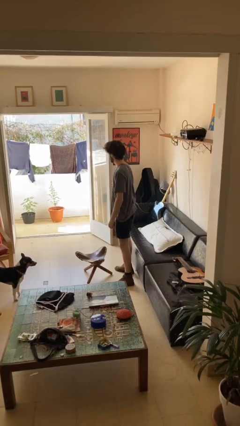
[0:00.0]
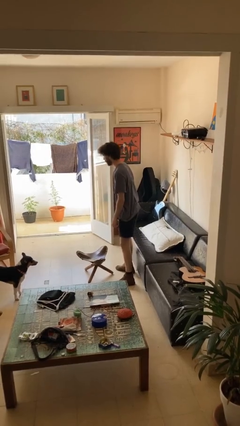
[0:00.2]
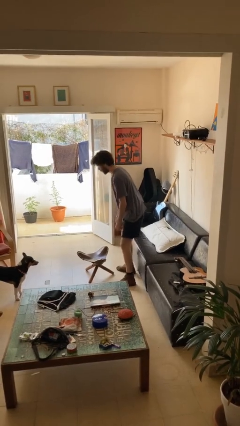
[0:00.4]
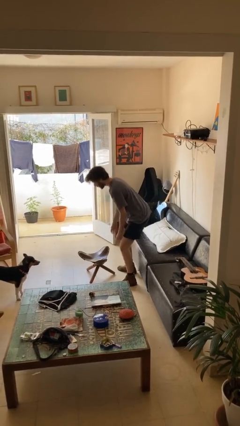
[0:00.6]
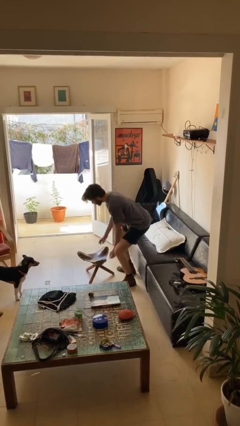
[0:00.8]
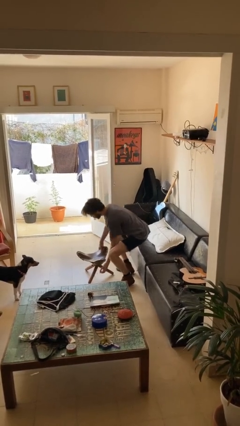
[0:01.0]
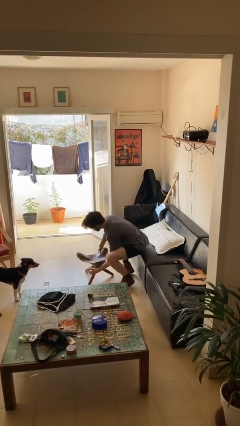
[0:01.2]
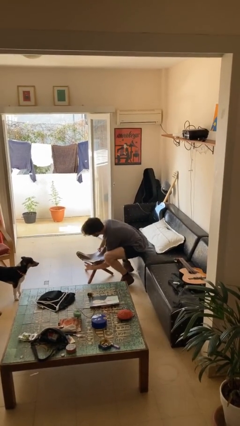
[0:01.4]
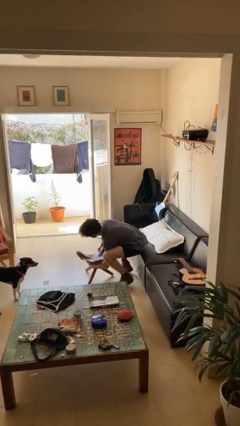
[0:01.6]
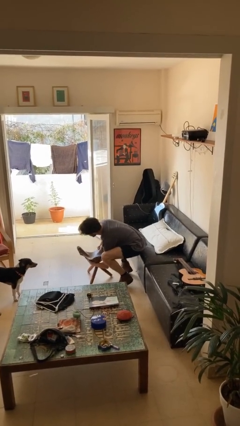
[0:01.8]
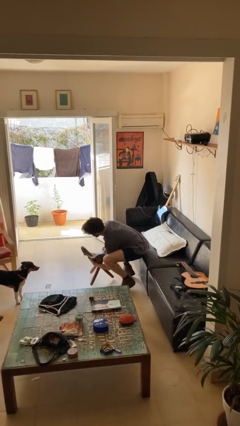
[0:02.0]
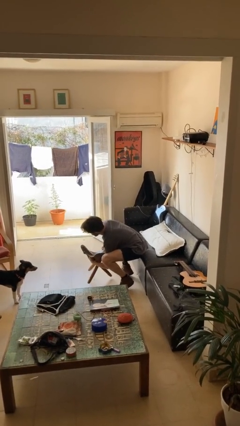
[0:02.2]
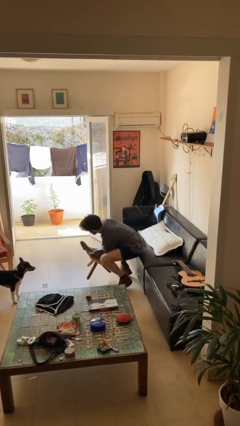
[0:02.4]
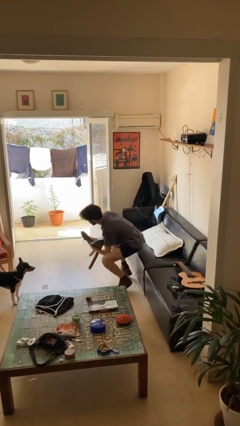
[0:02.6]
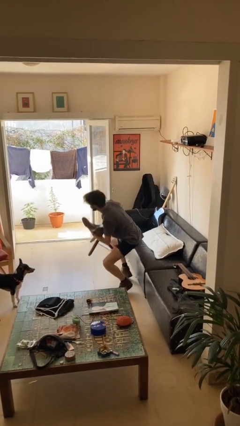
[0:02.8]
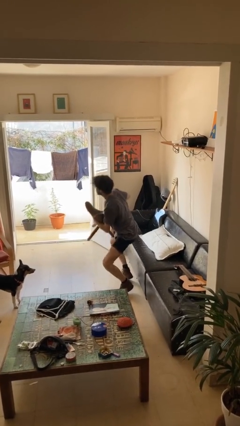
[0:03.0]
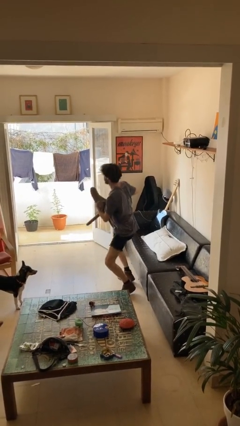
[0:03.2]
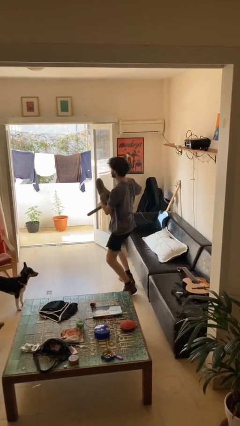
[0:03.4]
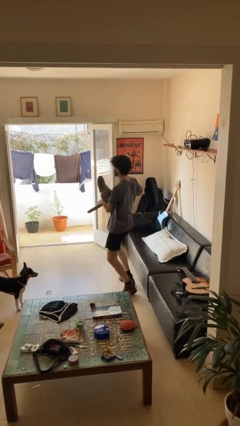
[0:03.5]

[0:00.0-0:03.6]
person picks up object from floor

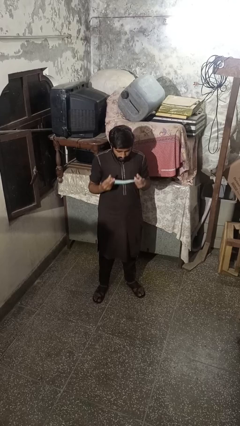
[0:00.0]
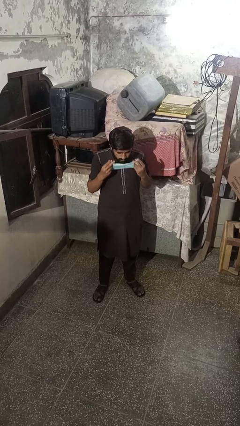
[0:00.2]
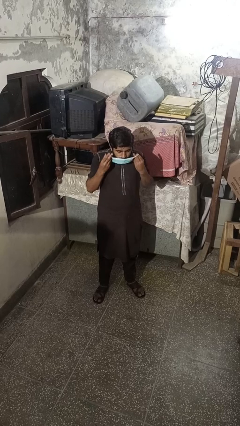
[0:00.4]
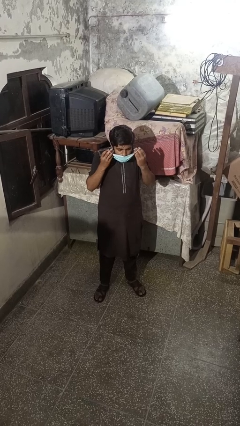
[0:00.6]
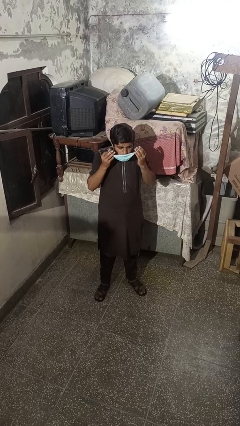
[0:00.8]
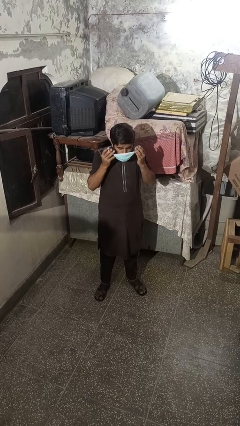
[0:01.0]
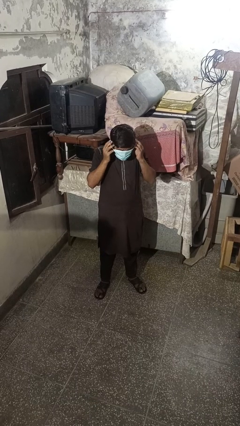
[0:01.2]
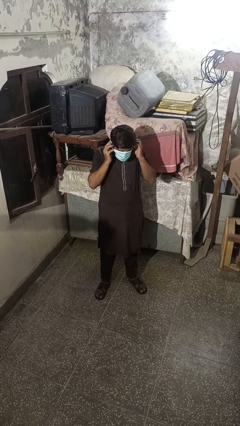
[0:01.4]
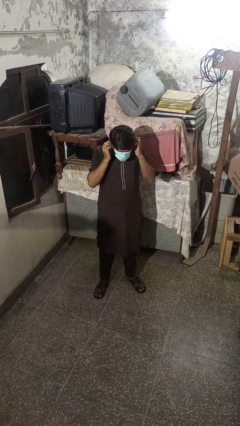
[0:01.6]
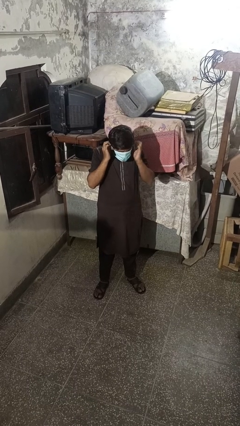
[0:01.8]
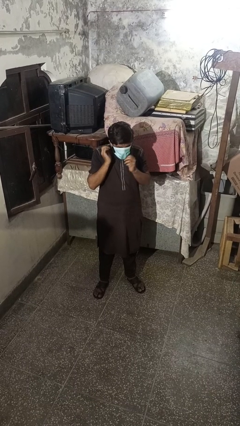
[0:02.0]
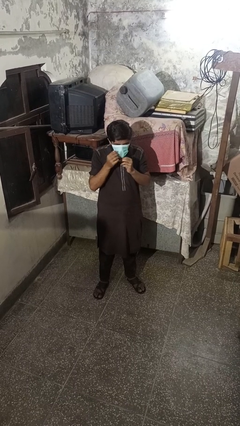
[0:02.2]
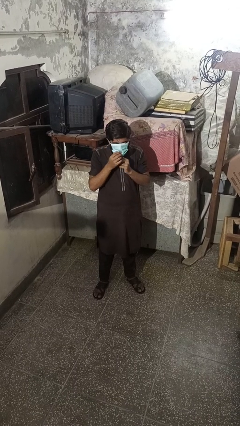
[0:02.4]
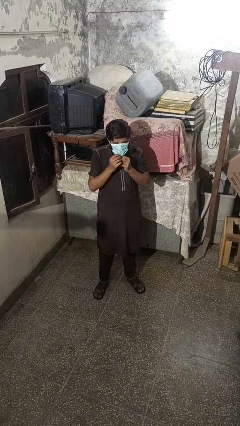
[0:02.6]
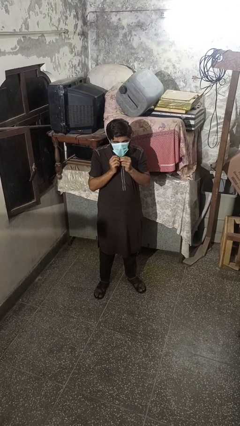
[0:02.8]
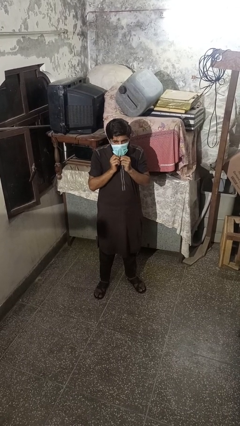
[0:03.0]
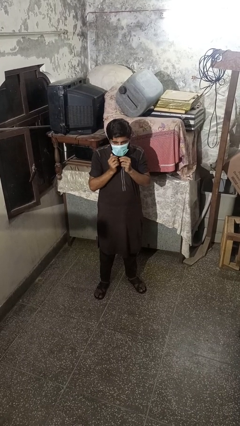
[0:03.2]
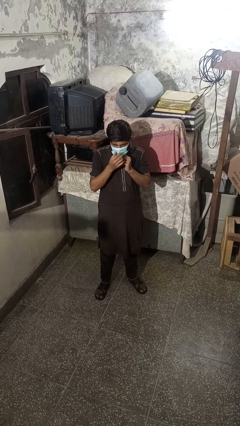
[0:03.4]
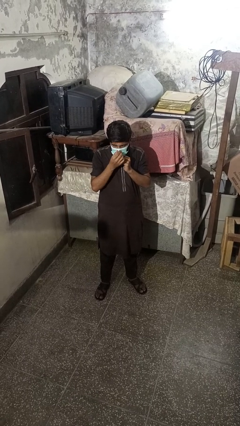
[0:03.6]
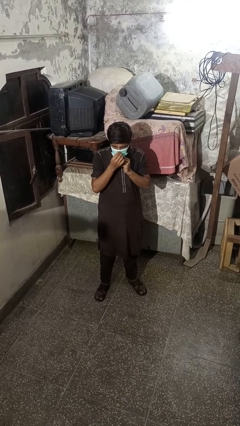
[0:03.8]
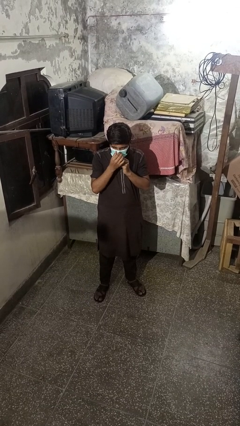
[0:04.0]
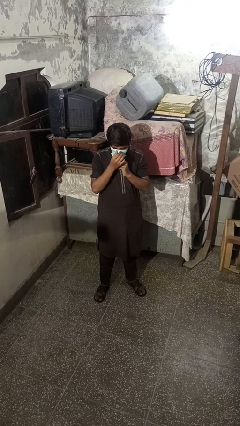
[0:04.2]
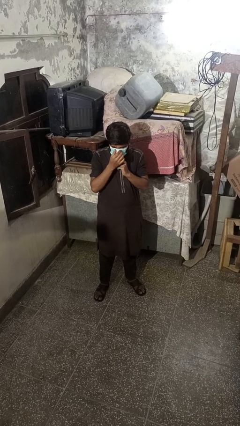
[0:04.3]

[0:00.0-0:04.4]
person puts on facemask

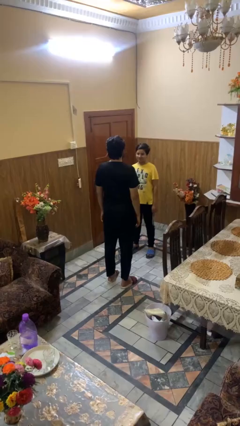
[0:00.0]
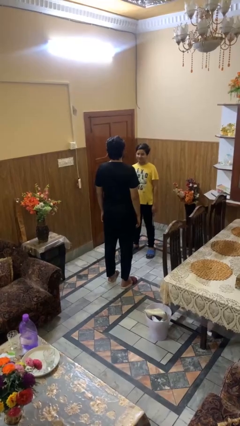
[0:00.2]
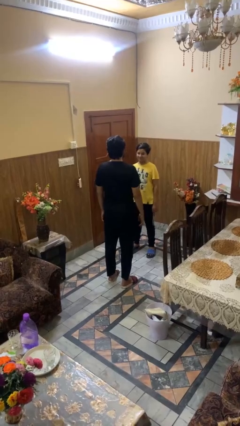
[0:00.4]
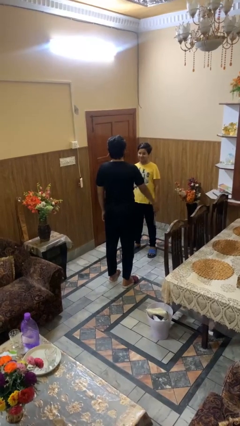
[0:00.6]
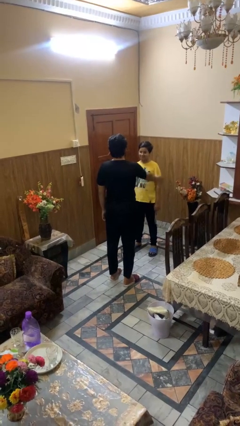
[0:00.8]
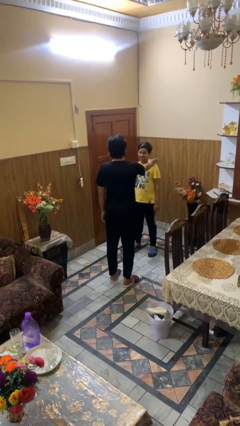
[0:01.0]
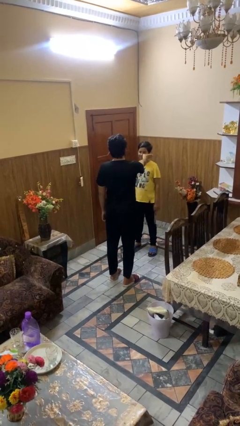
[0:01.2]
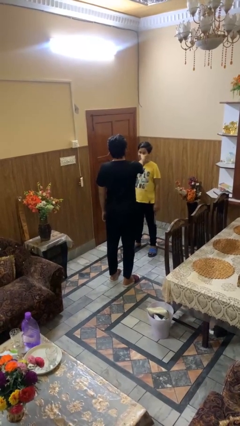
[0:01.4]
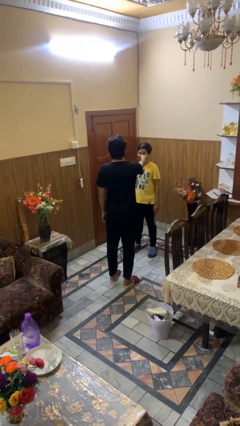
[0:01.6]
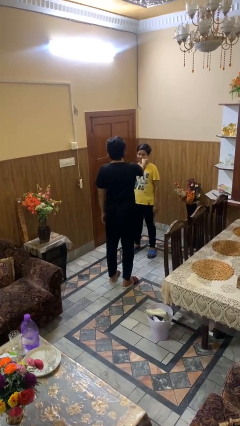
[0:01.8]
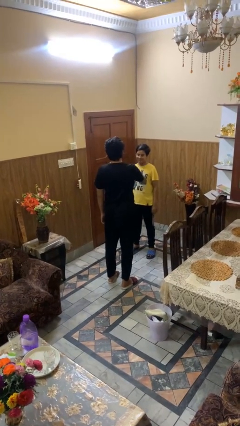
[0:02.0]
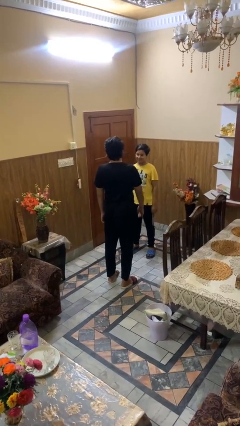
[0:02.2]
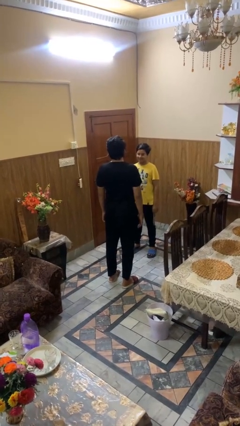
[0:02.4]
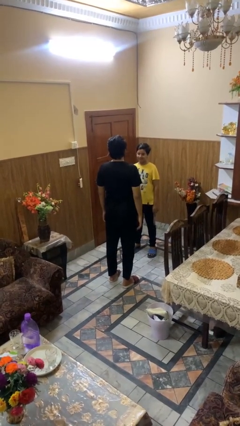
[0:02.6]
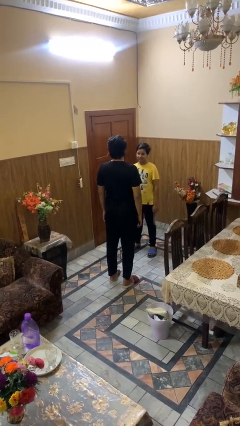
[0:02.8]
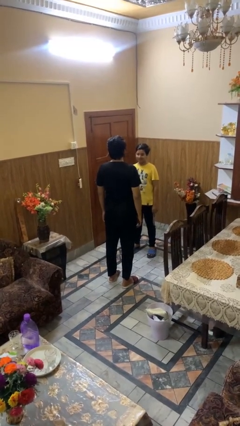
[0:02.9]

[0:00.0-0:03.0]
person touches face of person

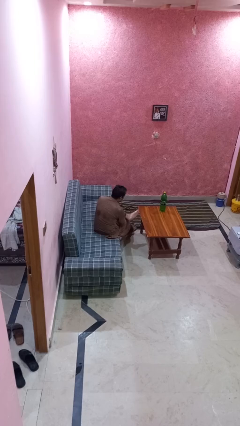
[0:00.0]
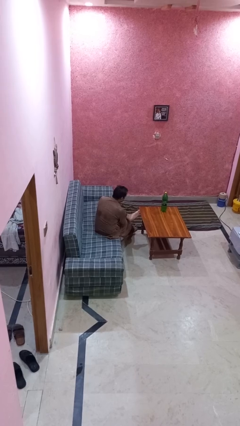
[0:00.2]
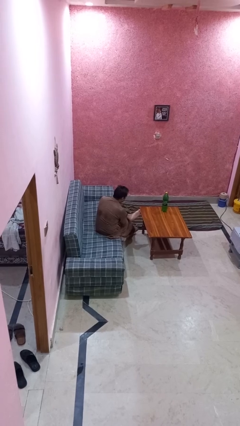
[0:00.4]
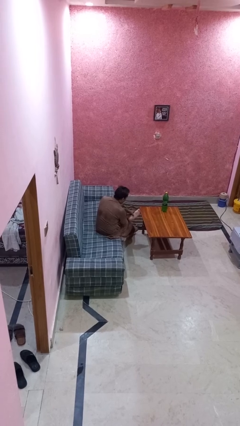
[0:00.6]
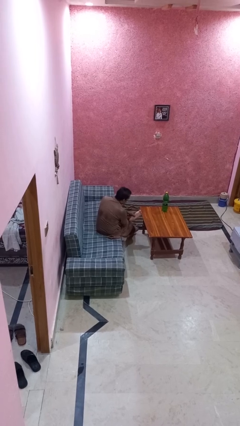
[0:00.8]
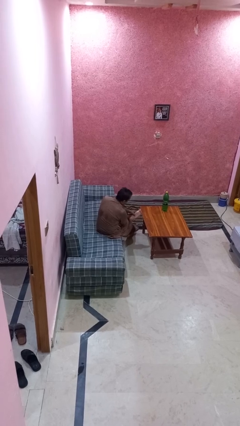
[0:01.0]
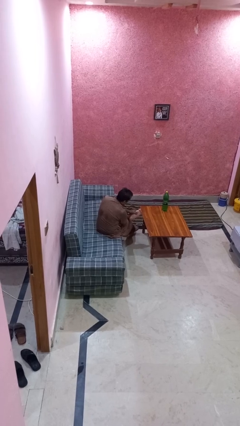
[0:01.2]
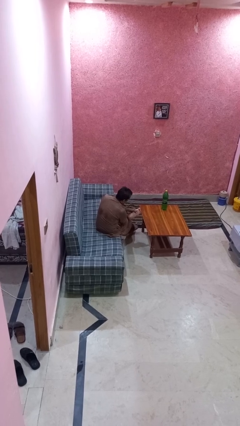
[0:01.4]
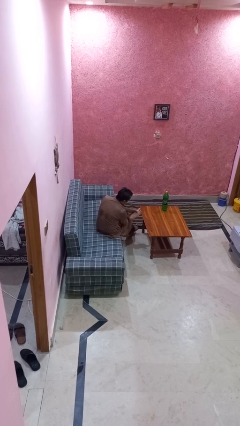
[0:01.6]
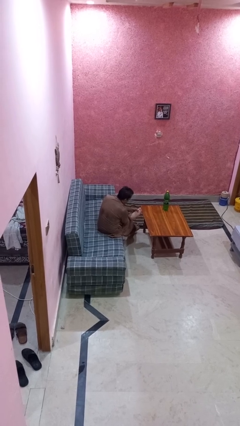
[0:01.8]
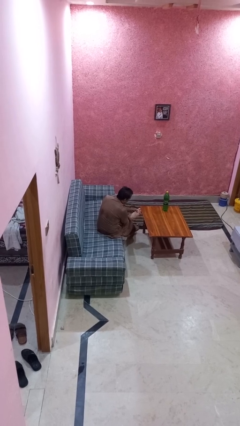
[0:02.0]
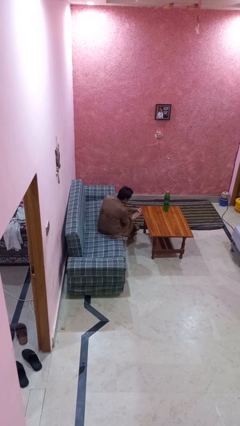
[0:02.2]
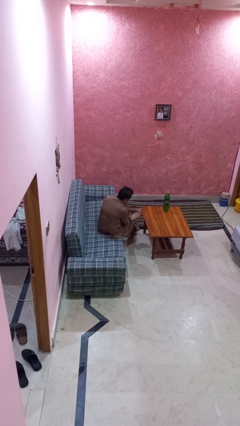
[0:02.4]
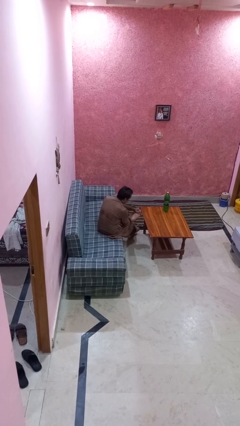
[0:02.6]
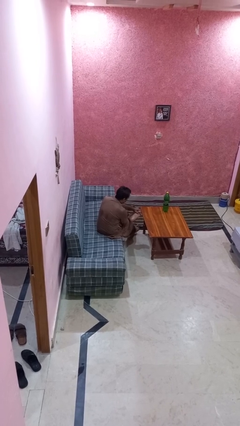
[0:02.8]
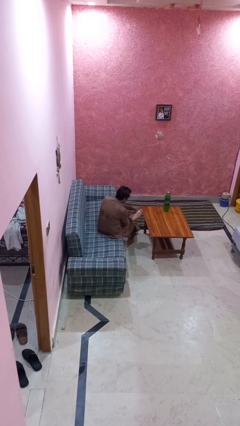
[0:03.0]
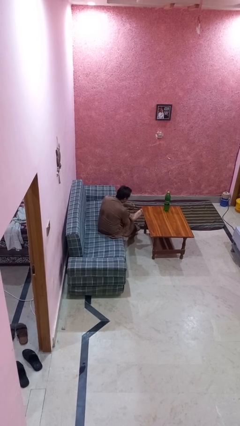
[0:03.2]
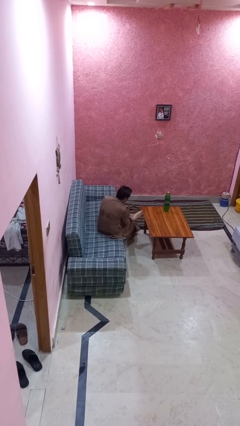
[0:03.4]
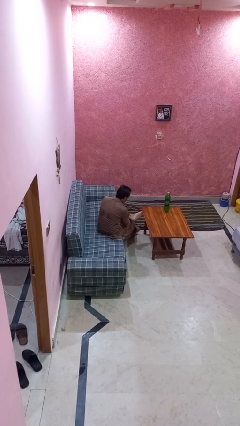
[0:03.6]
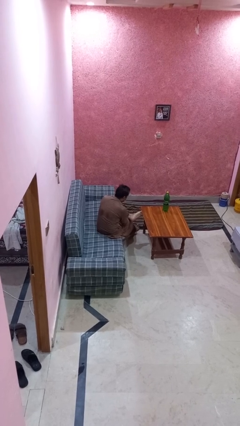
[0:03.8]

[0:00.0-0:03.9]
person rubs foot

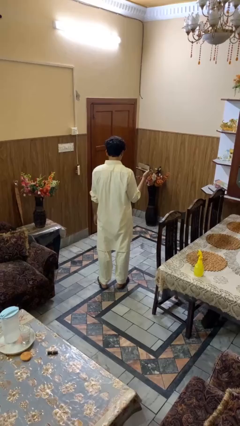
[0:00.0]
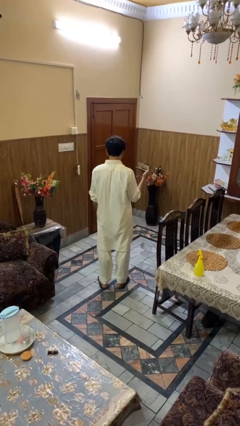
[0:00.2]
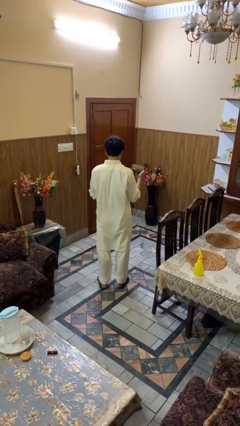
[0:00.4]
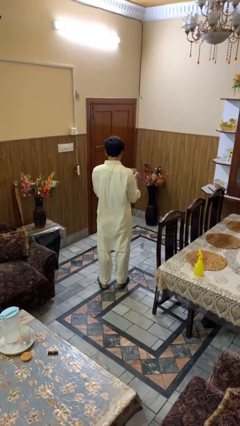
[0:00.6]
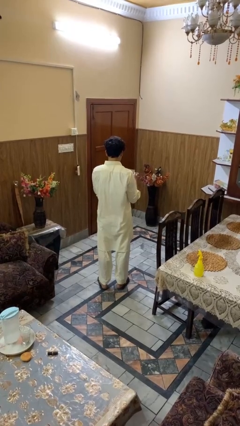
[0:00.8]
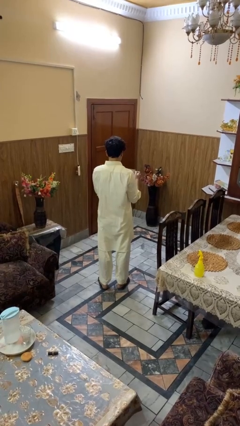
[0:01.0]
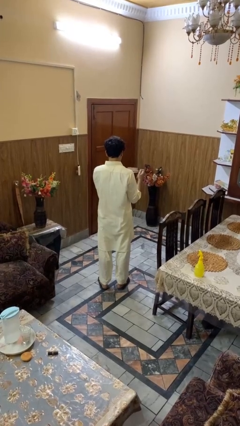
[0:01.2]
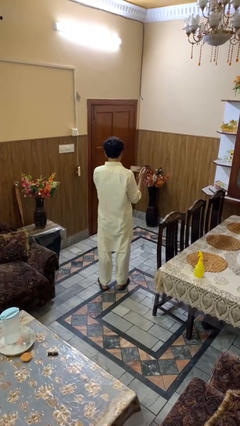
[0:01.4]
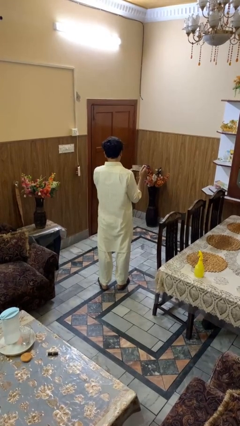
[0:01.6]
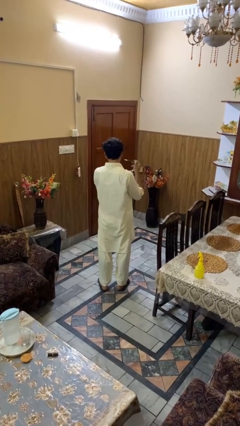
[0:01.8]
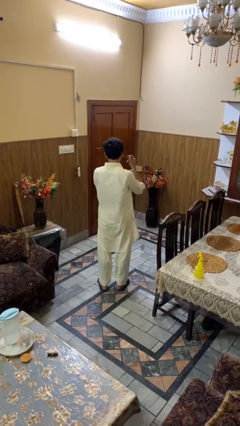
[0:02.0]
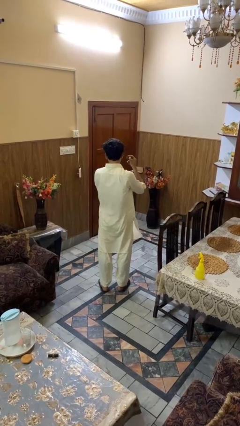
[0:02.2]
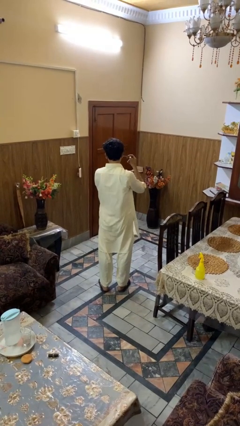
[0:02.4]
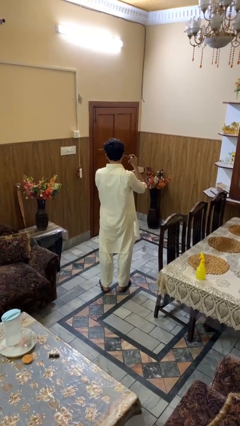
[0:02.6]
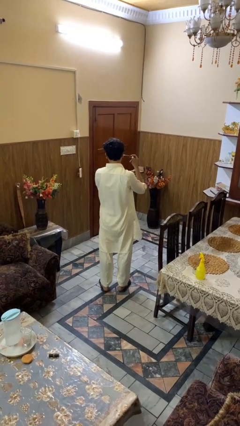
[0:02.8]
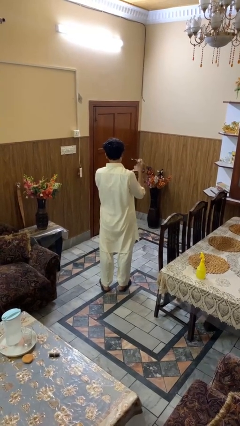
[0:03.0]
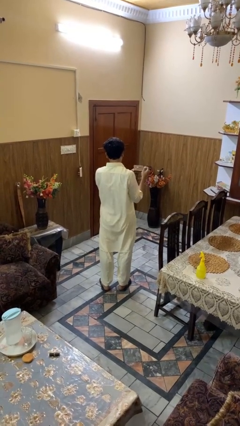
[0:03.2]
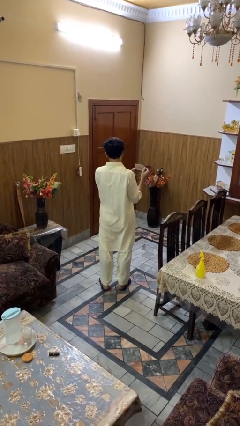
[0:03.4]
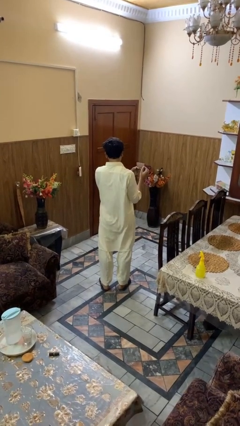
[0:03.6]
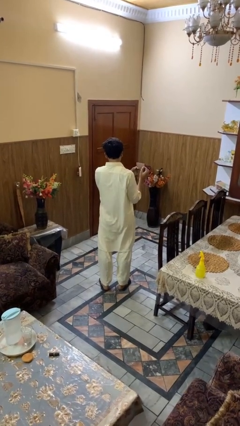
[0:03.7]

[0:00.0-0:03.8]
person applies eye makeup
